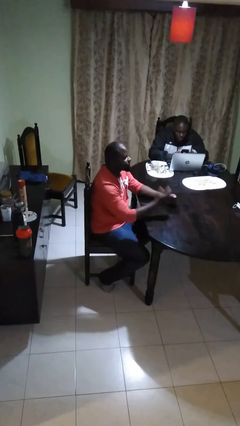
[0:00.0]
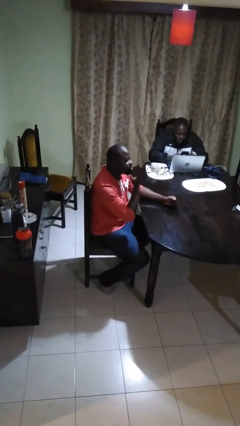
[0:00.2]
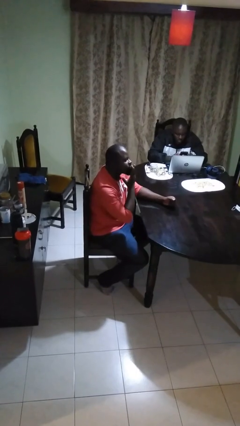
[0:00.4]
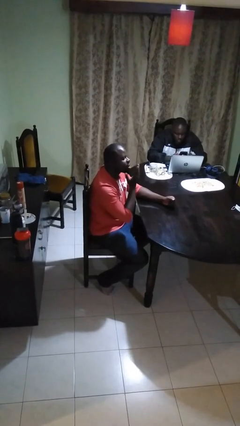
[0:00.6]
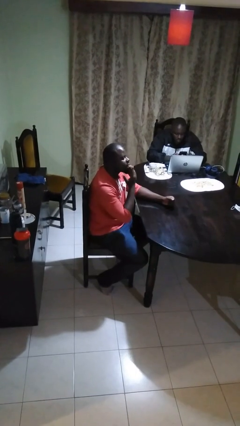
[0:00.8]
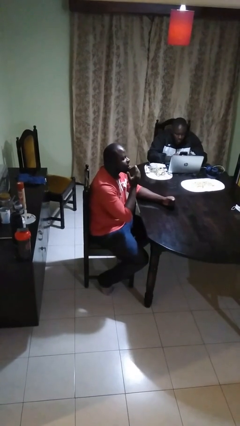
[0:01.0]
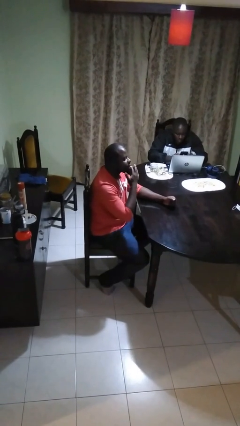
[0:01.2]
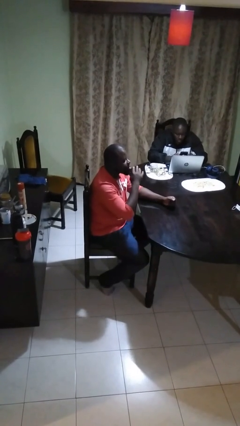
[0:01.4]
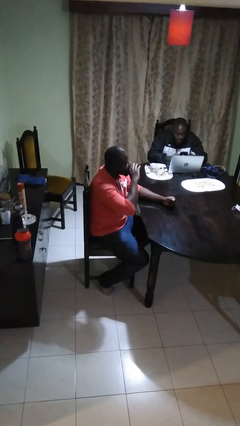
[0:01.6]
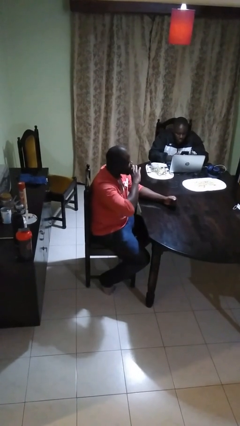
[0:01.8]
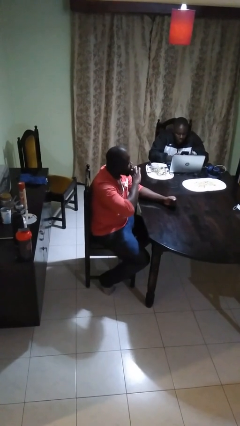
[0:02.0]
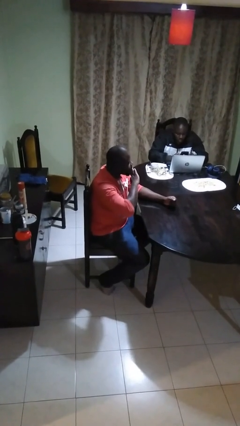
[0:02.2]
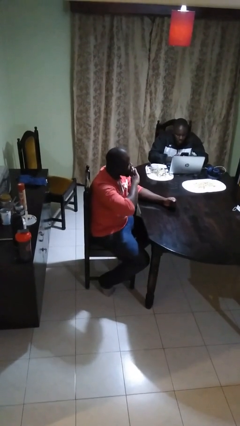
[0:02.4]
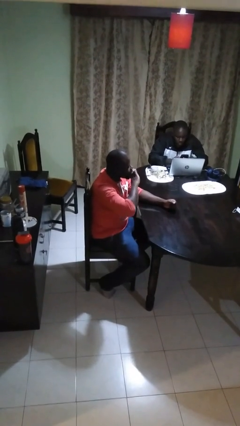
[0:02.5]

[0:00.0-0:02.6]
person licks fingers

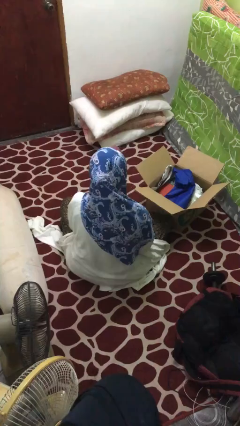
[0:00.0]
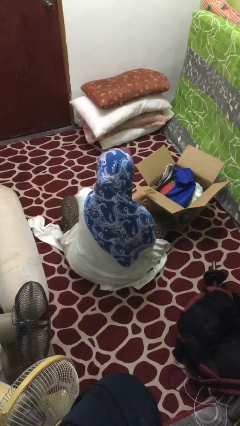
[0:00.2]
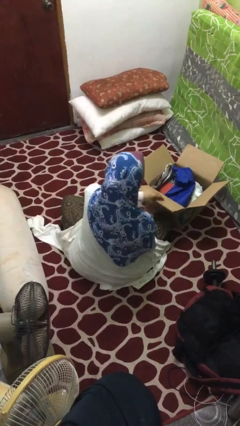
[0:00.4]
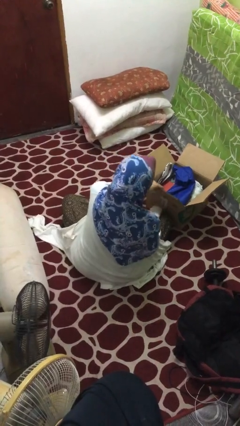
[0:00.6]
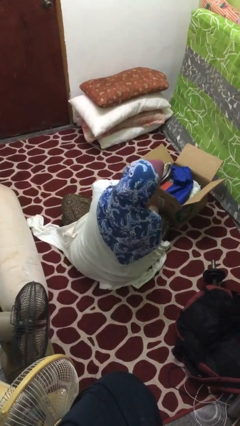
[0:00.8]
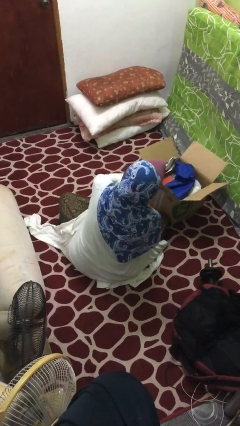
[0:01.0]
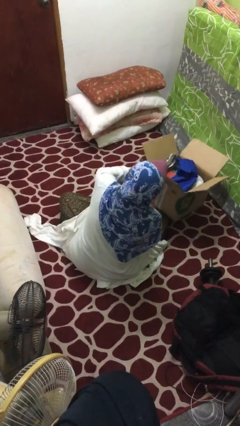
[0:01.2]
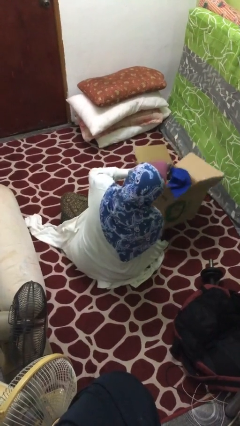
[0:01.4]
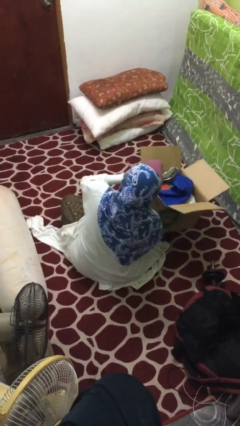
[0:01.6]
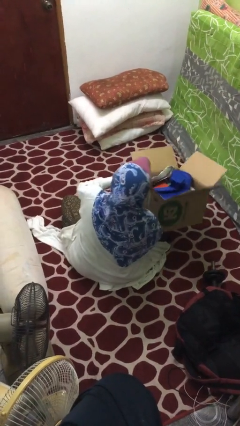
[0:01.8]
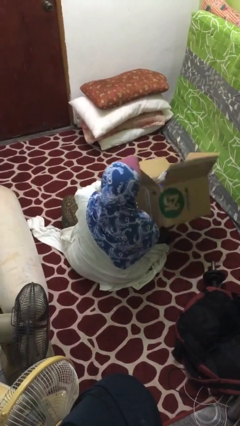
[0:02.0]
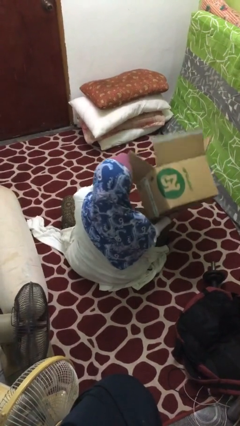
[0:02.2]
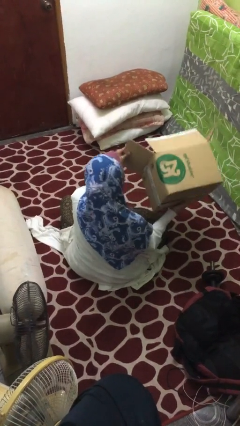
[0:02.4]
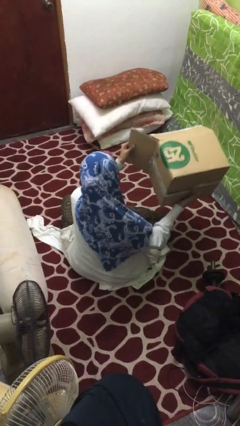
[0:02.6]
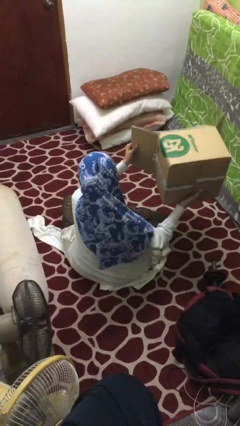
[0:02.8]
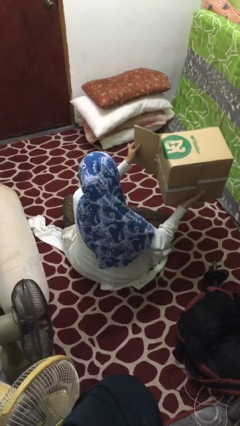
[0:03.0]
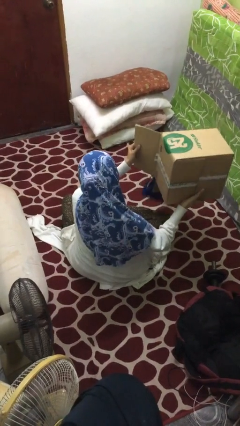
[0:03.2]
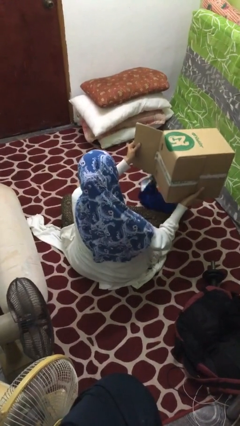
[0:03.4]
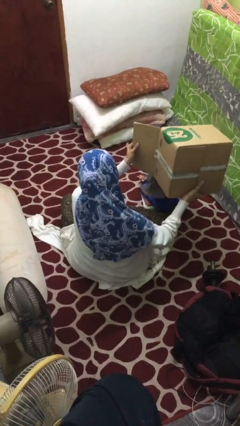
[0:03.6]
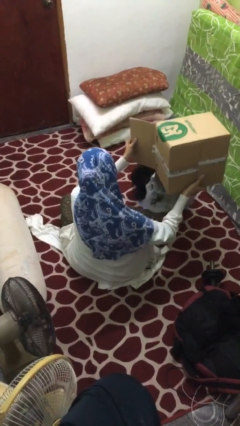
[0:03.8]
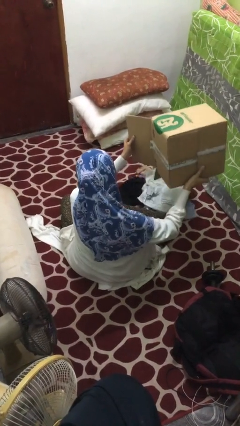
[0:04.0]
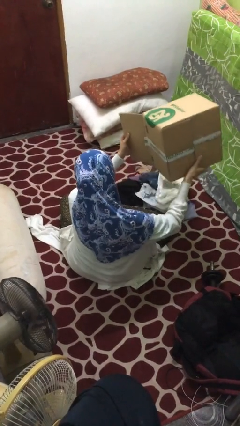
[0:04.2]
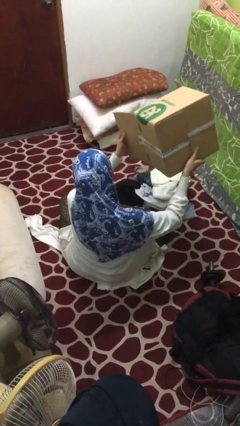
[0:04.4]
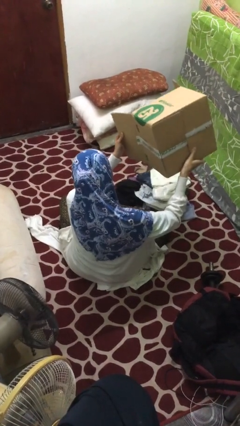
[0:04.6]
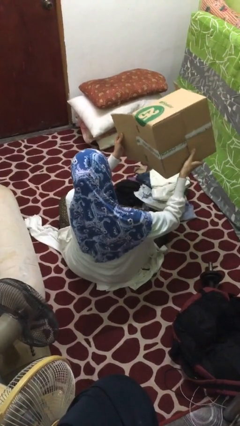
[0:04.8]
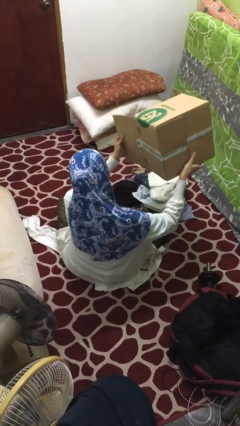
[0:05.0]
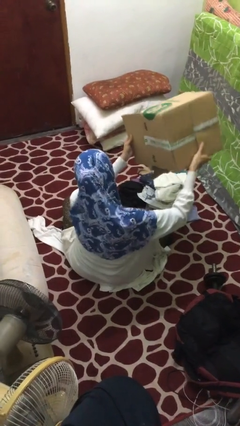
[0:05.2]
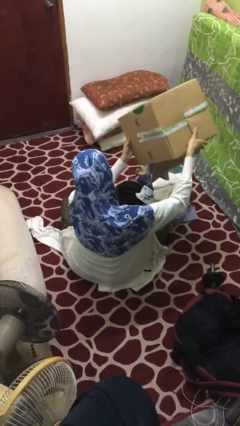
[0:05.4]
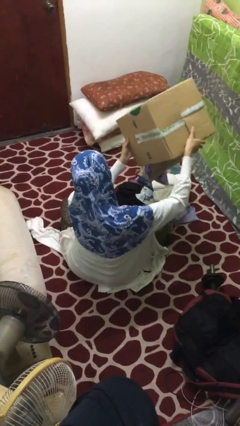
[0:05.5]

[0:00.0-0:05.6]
person unloads box onto floor

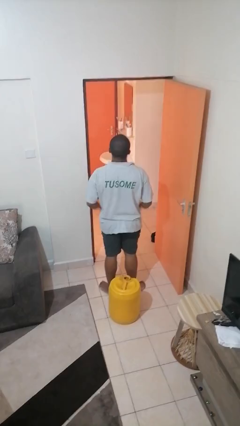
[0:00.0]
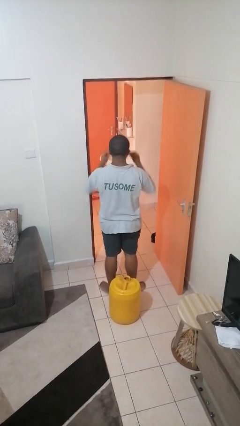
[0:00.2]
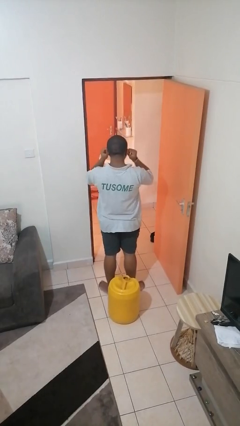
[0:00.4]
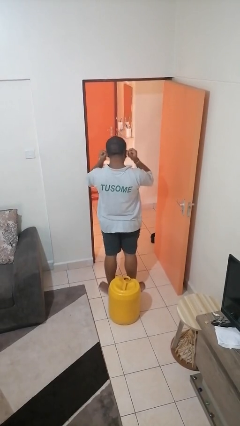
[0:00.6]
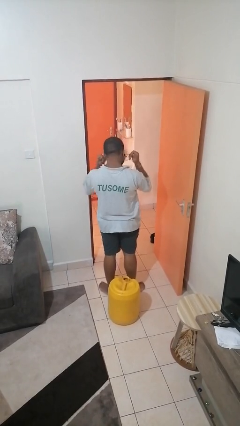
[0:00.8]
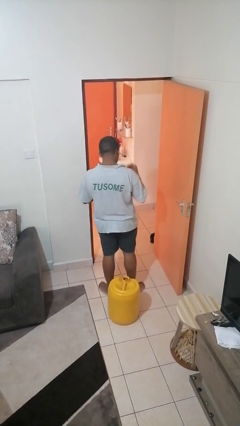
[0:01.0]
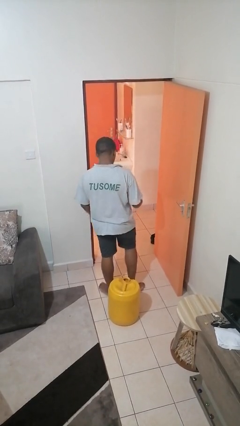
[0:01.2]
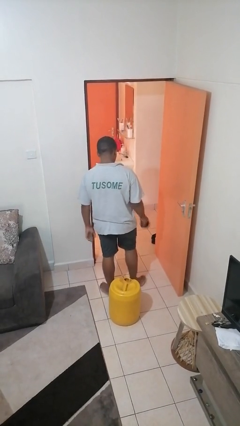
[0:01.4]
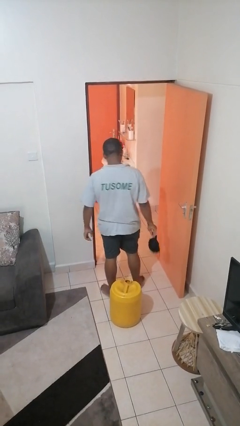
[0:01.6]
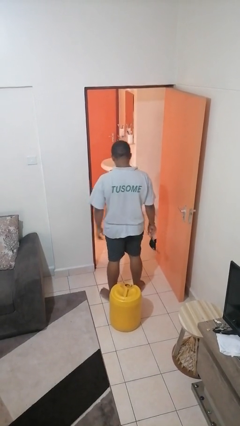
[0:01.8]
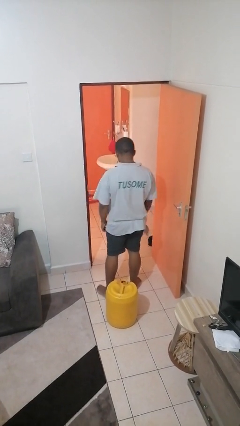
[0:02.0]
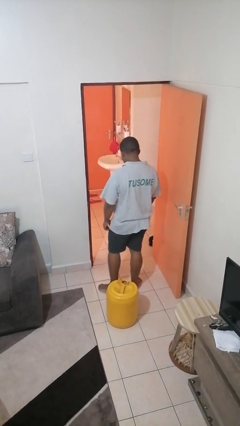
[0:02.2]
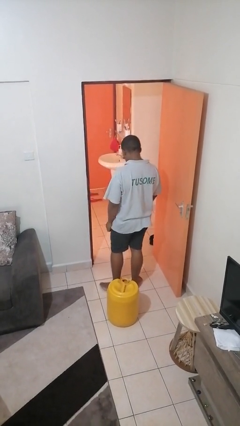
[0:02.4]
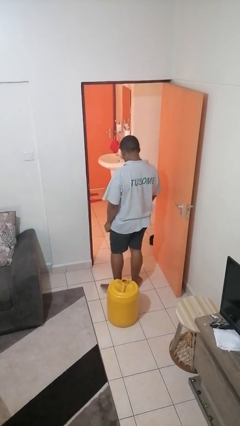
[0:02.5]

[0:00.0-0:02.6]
person takes off facemask

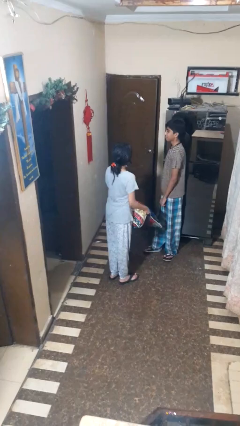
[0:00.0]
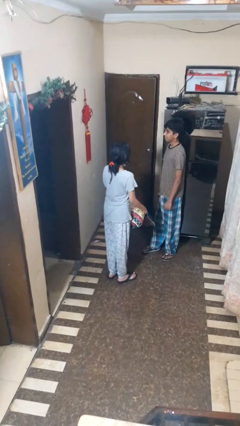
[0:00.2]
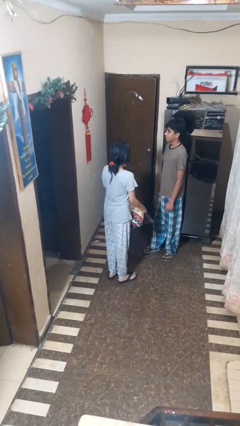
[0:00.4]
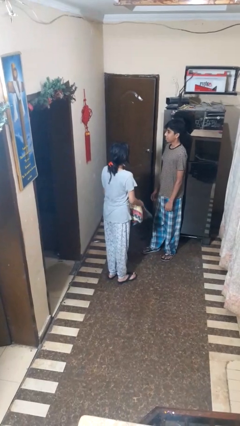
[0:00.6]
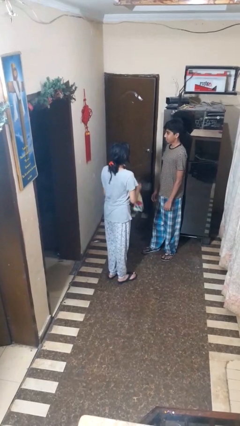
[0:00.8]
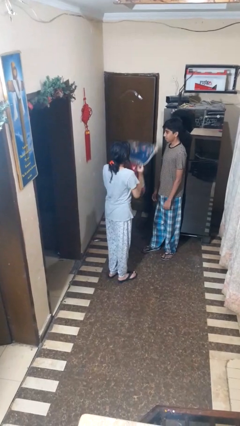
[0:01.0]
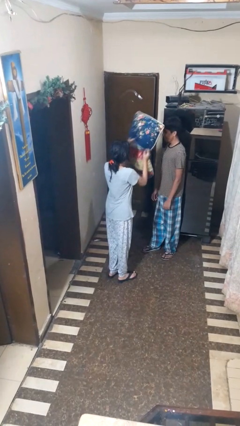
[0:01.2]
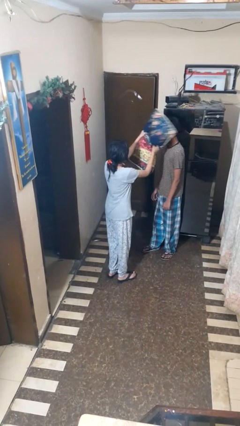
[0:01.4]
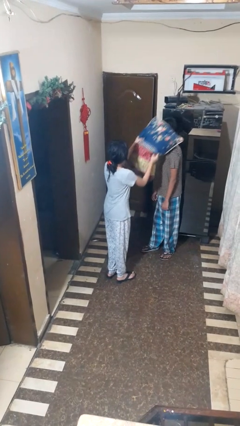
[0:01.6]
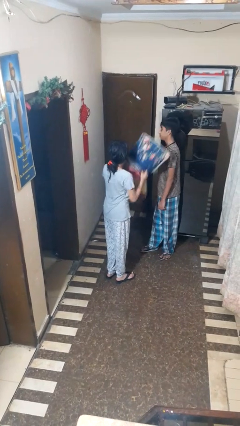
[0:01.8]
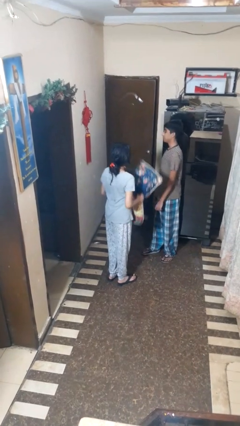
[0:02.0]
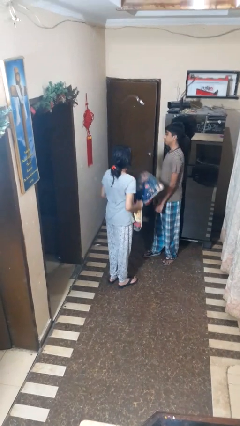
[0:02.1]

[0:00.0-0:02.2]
person hits person with pillow

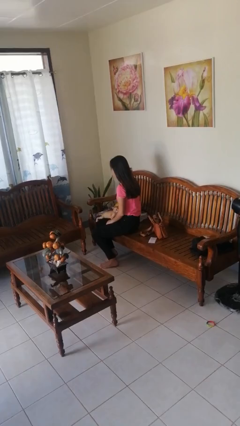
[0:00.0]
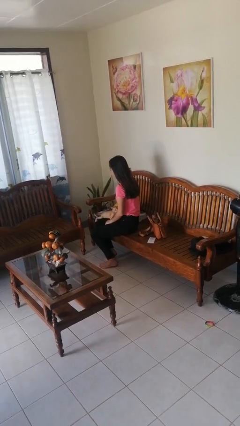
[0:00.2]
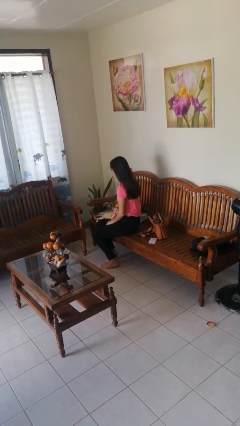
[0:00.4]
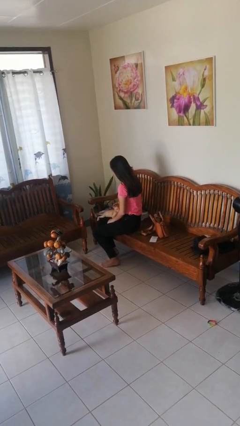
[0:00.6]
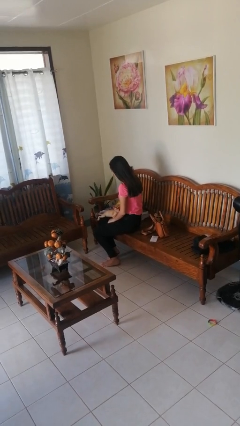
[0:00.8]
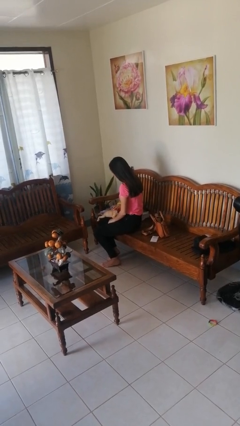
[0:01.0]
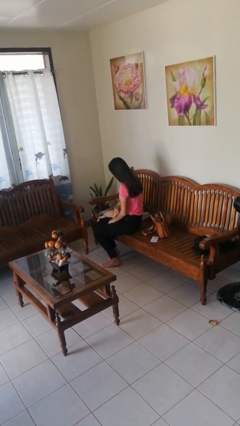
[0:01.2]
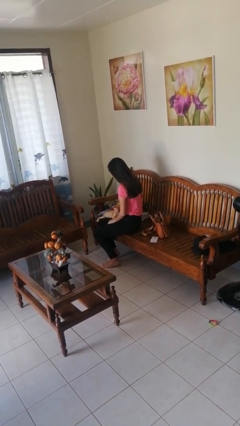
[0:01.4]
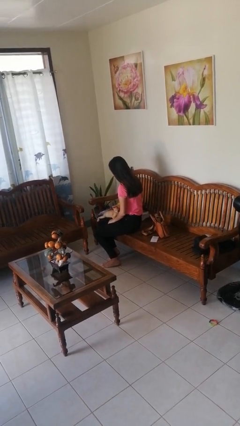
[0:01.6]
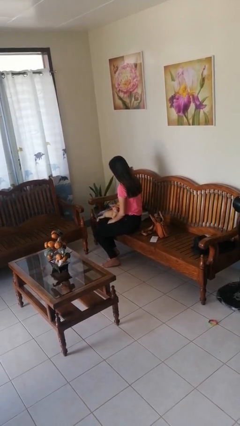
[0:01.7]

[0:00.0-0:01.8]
person pets cat

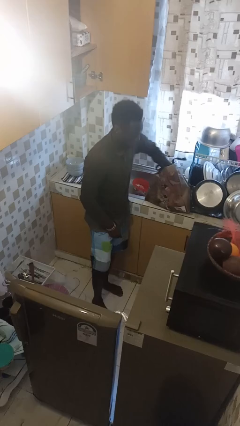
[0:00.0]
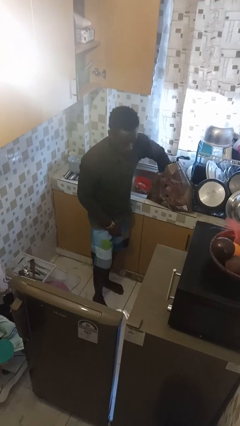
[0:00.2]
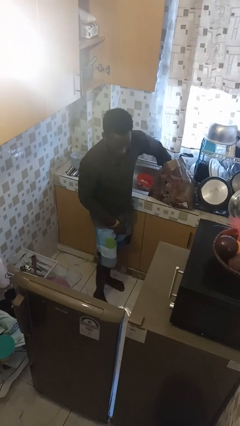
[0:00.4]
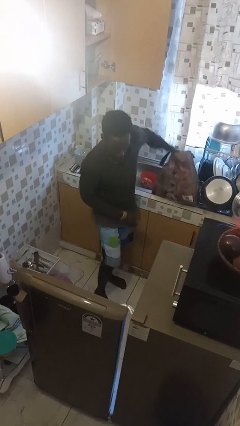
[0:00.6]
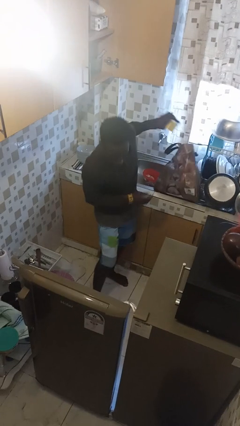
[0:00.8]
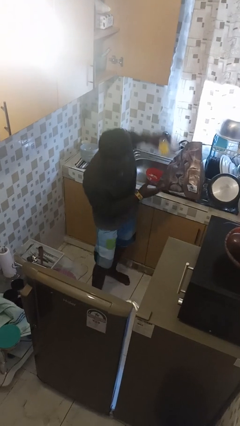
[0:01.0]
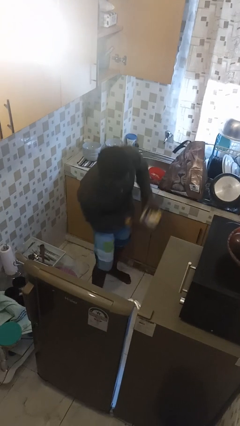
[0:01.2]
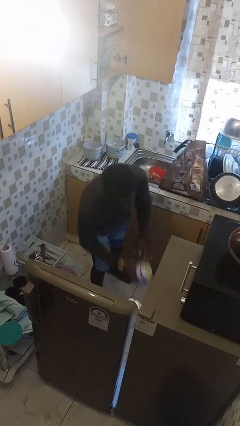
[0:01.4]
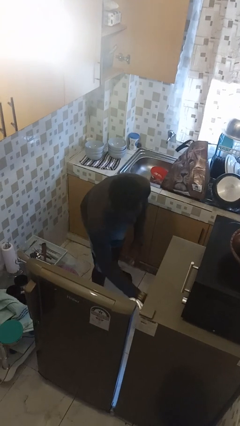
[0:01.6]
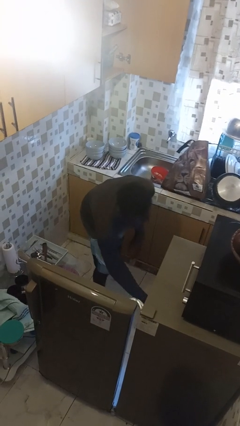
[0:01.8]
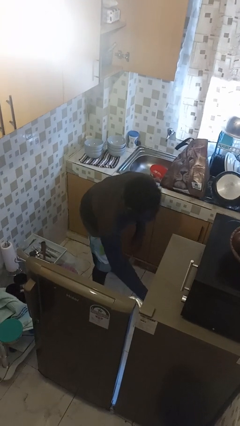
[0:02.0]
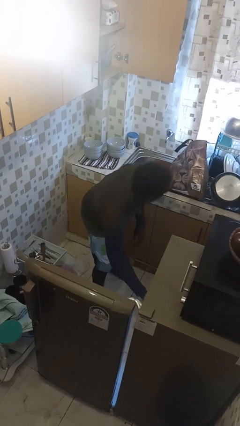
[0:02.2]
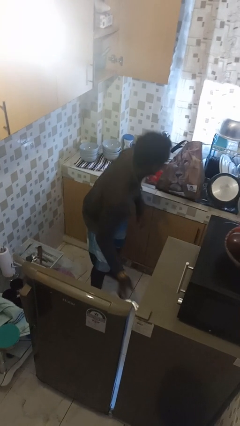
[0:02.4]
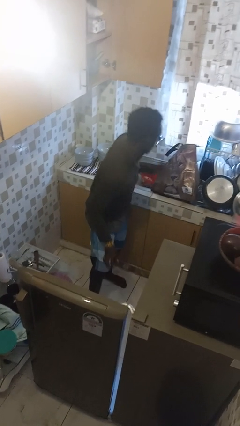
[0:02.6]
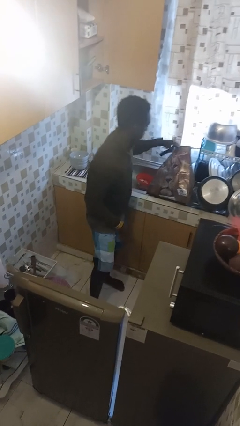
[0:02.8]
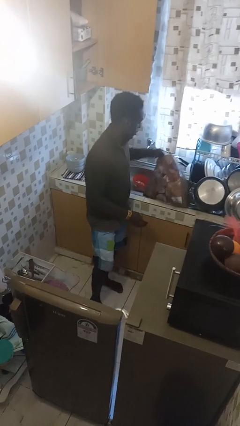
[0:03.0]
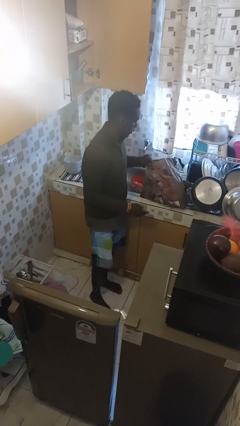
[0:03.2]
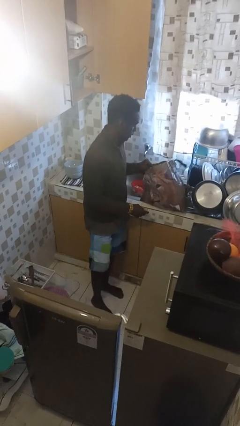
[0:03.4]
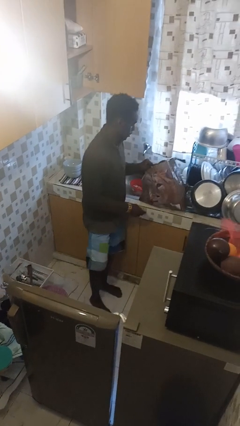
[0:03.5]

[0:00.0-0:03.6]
person loads groceries into refrigerator
